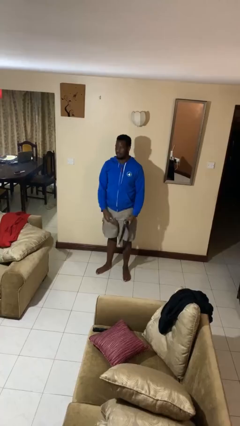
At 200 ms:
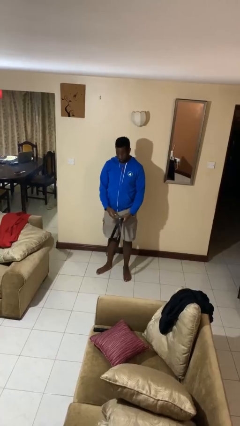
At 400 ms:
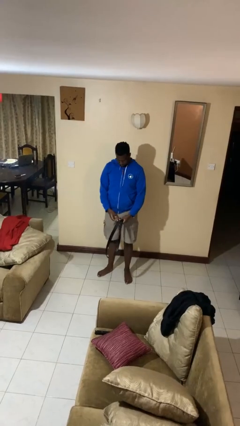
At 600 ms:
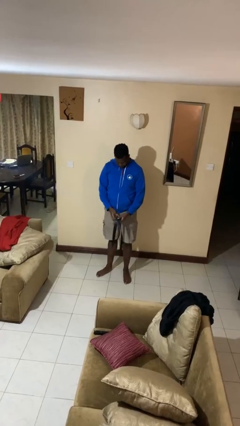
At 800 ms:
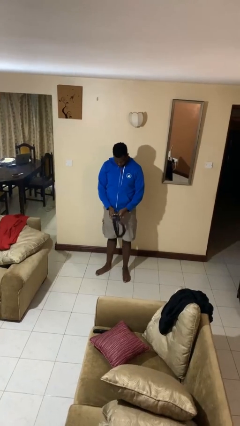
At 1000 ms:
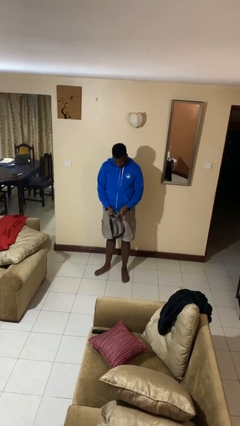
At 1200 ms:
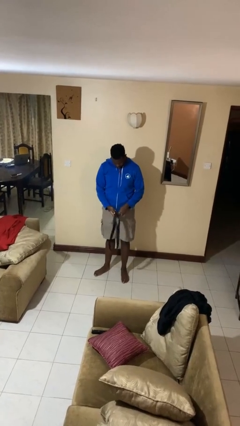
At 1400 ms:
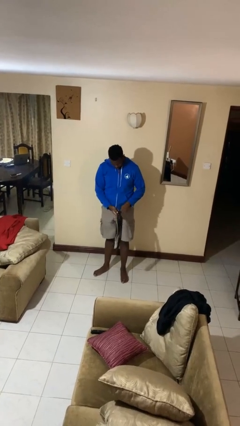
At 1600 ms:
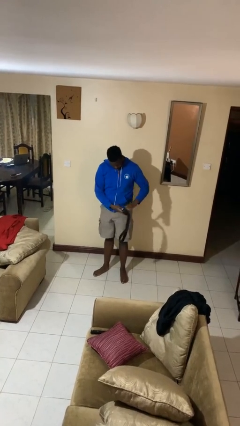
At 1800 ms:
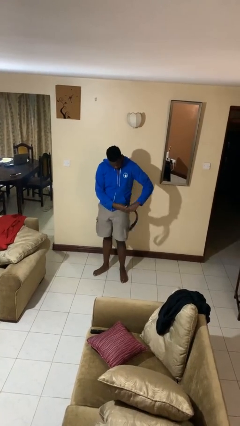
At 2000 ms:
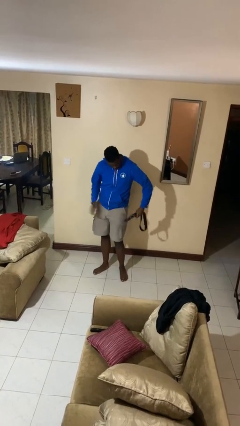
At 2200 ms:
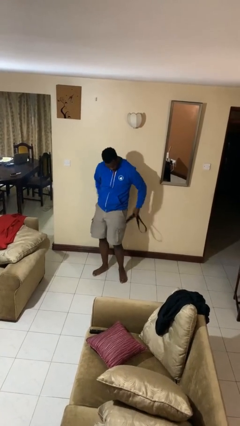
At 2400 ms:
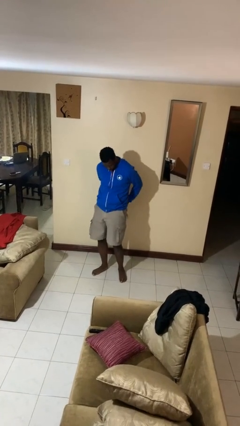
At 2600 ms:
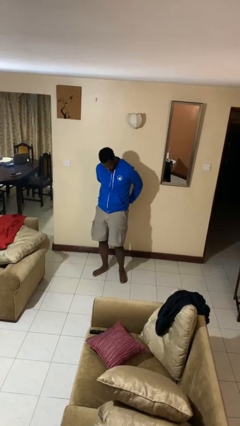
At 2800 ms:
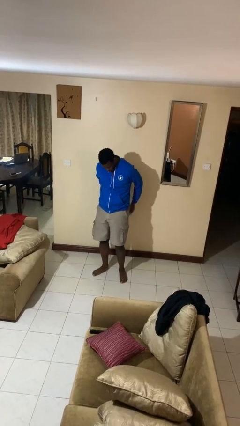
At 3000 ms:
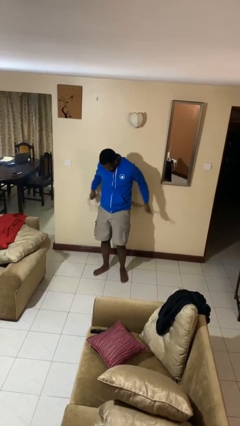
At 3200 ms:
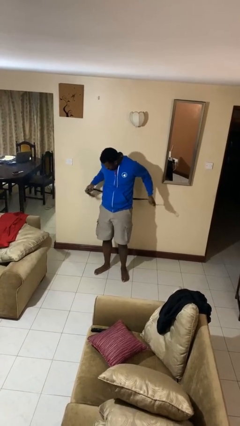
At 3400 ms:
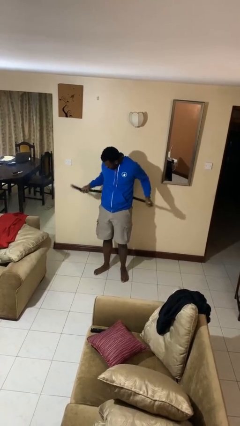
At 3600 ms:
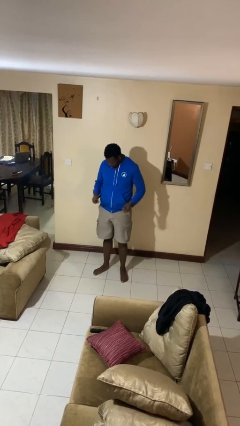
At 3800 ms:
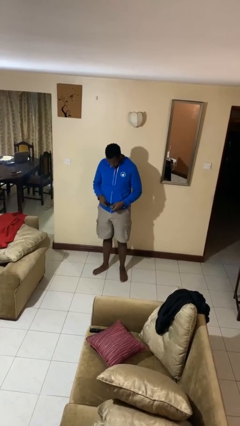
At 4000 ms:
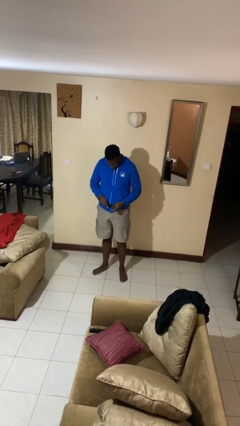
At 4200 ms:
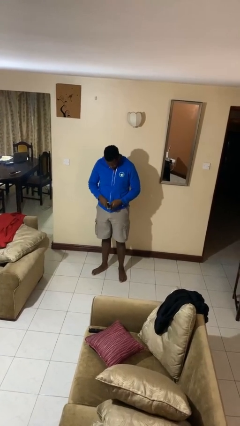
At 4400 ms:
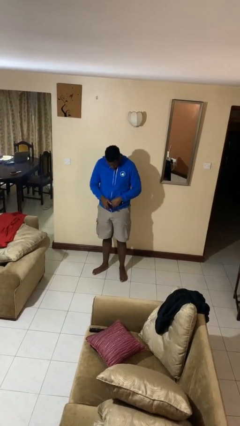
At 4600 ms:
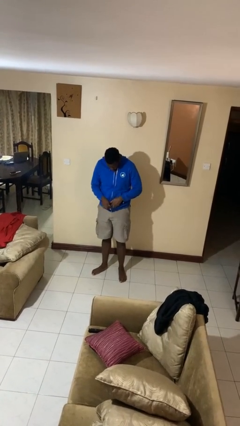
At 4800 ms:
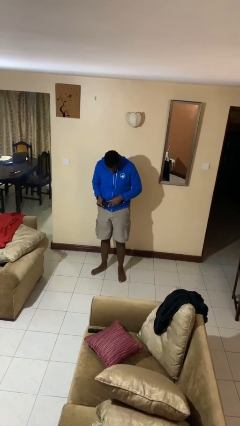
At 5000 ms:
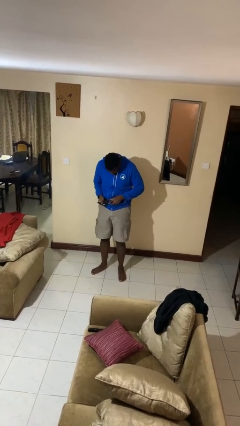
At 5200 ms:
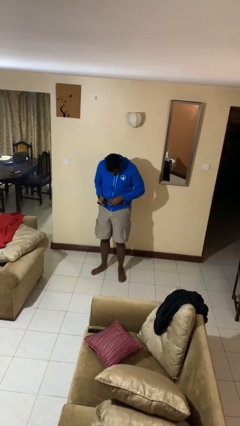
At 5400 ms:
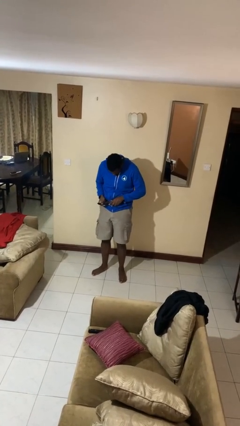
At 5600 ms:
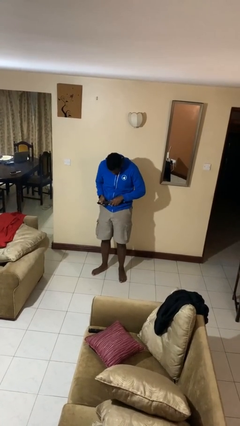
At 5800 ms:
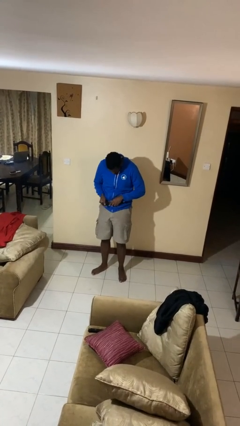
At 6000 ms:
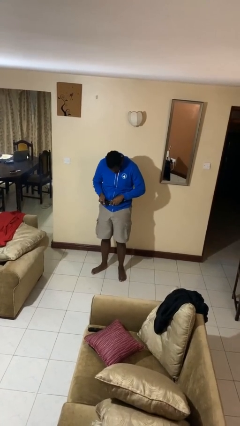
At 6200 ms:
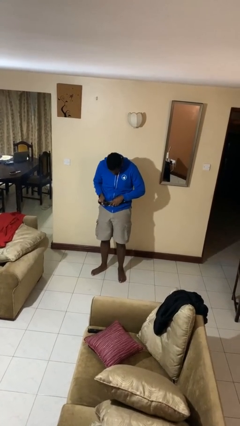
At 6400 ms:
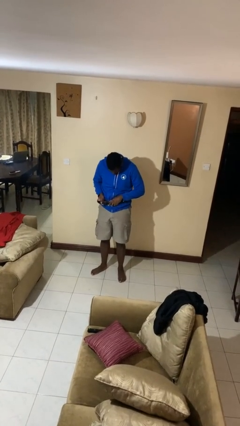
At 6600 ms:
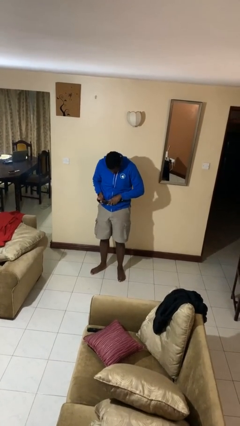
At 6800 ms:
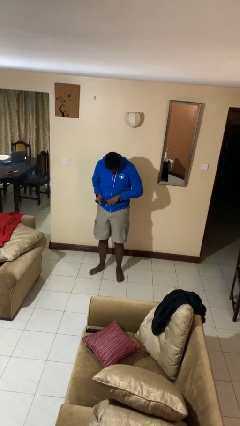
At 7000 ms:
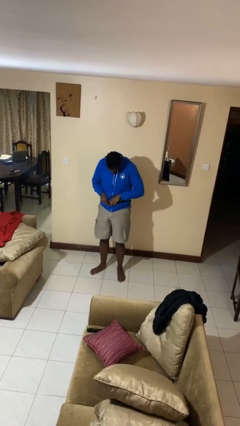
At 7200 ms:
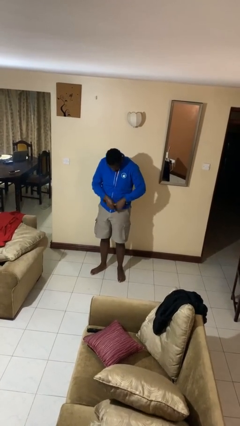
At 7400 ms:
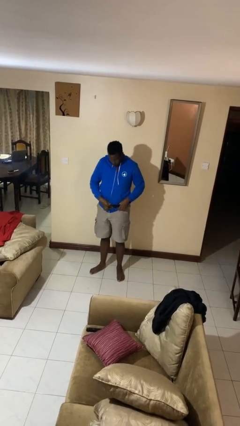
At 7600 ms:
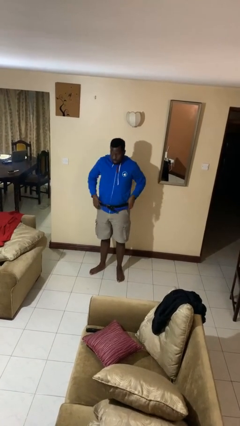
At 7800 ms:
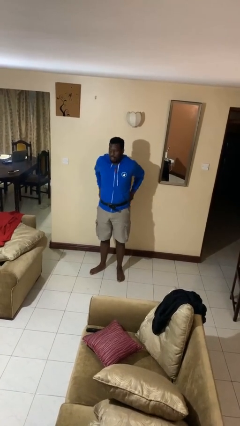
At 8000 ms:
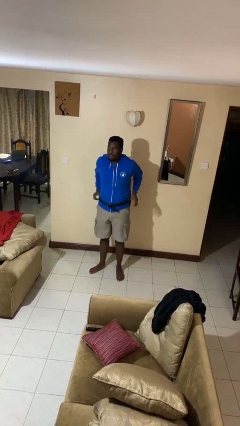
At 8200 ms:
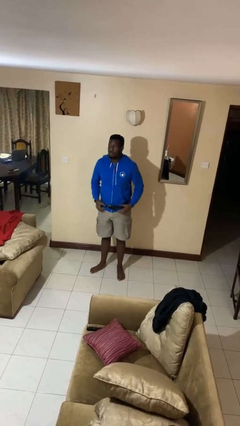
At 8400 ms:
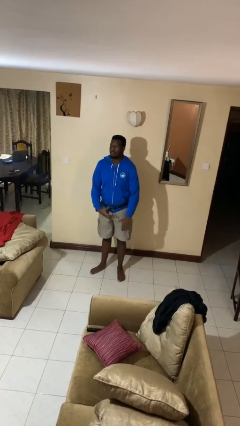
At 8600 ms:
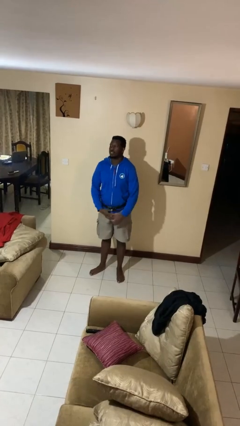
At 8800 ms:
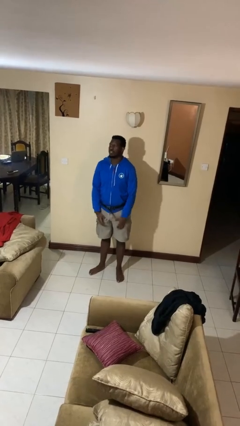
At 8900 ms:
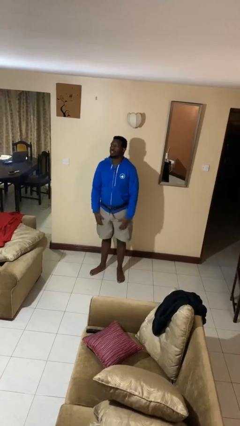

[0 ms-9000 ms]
person puts on belt

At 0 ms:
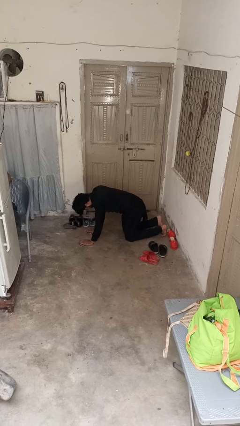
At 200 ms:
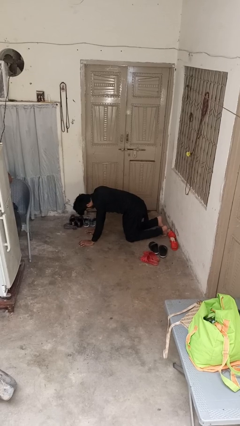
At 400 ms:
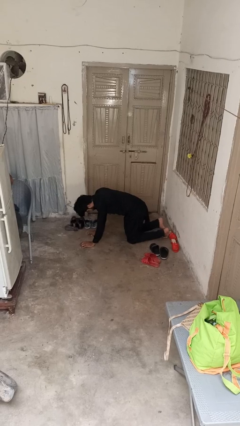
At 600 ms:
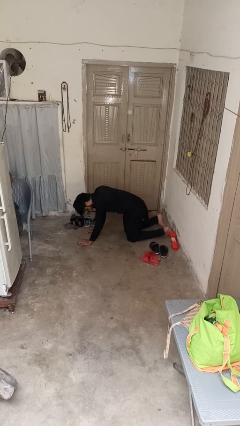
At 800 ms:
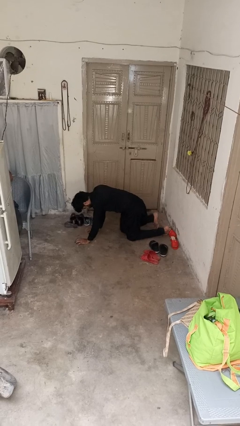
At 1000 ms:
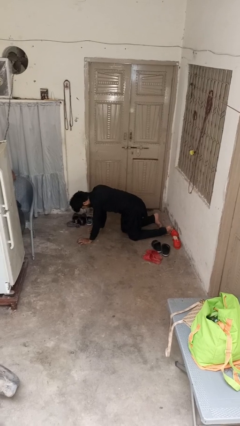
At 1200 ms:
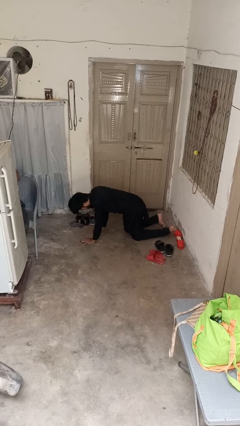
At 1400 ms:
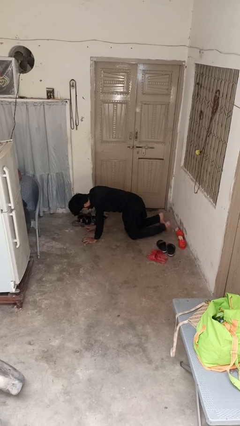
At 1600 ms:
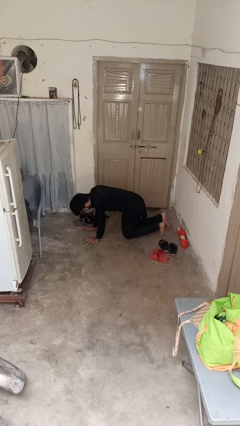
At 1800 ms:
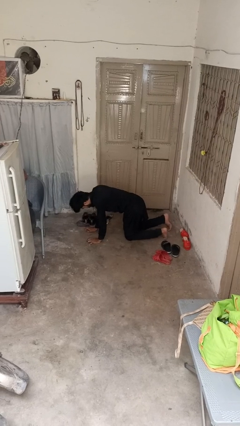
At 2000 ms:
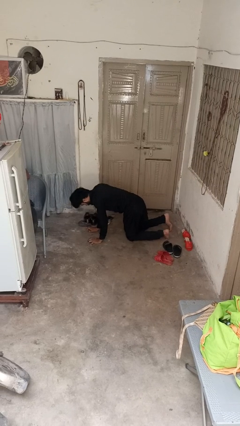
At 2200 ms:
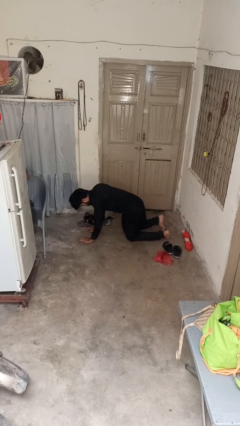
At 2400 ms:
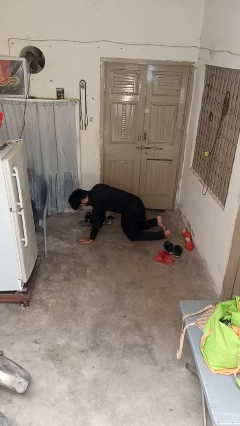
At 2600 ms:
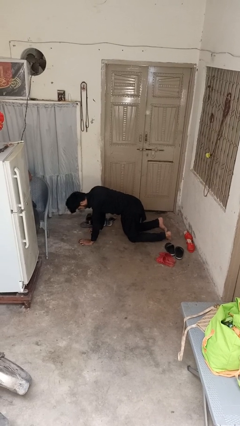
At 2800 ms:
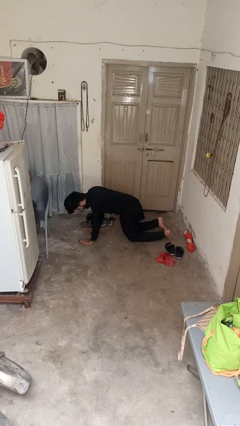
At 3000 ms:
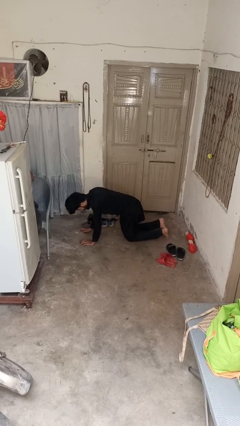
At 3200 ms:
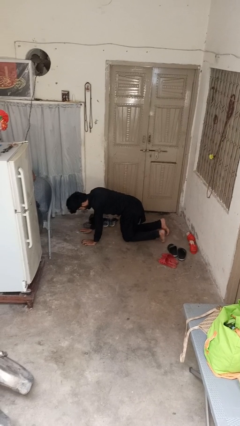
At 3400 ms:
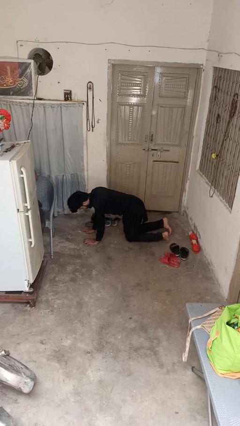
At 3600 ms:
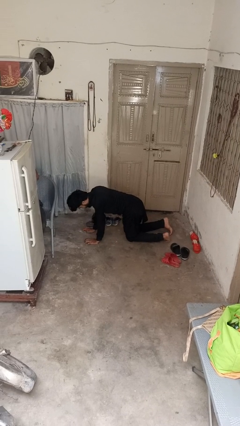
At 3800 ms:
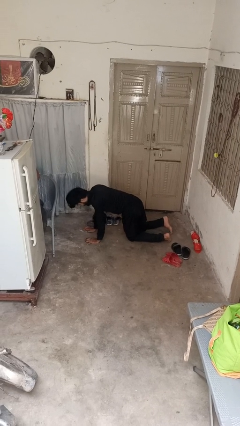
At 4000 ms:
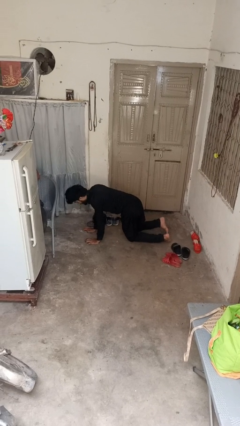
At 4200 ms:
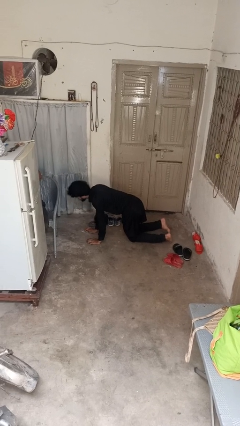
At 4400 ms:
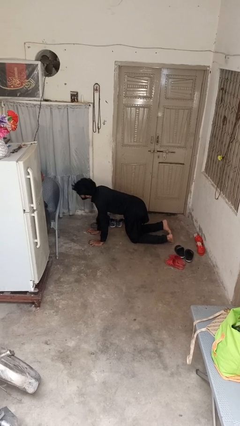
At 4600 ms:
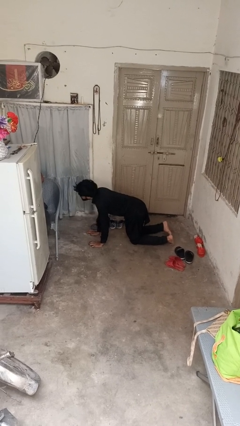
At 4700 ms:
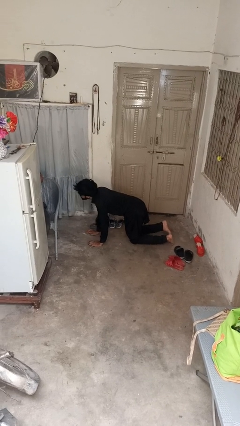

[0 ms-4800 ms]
person crawls

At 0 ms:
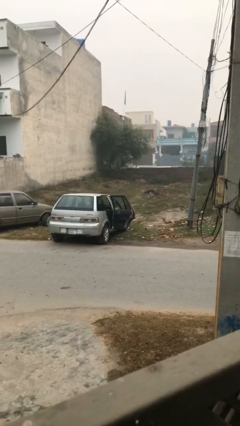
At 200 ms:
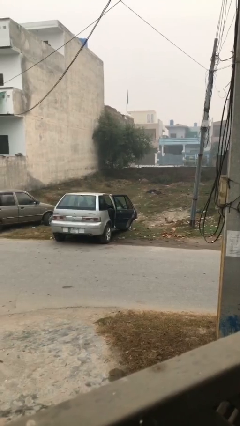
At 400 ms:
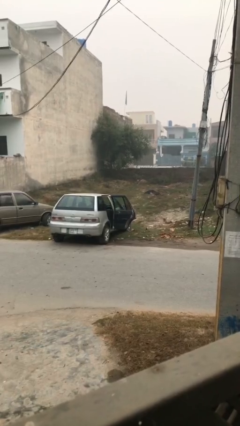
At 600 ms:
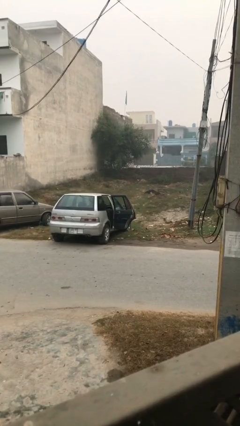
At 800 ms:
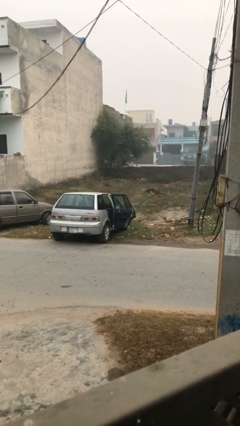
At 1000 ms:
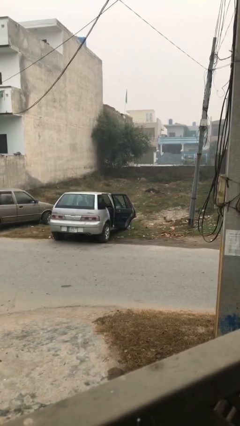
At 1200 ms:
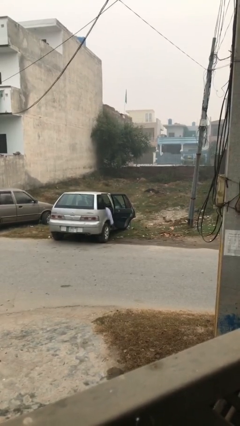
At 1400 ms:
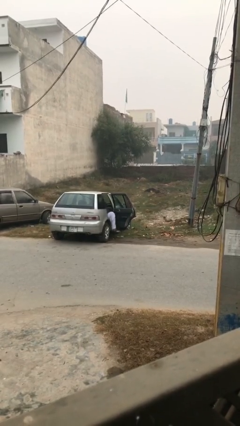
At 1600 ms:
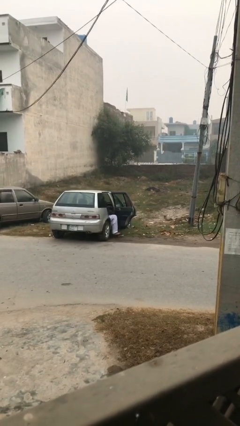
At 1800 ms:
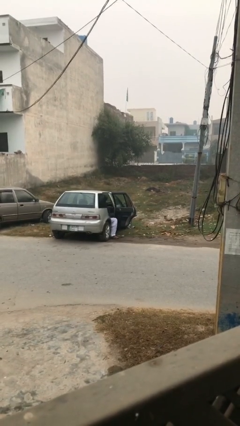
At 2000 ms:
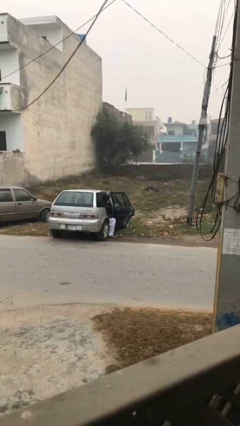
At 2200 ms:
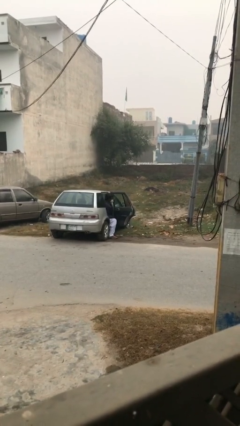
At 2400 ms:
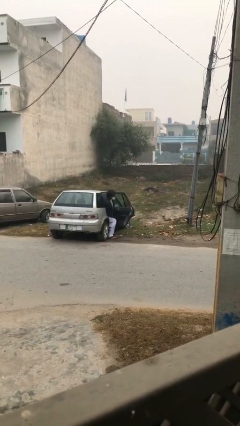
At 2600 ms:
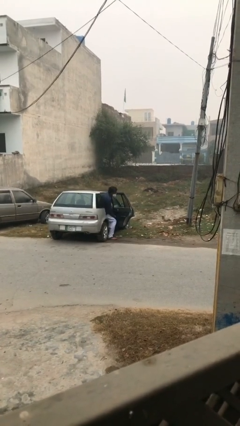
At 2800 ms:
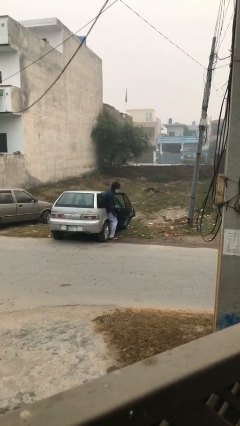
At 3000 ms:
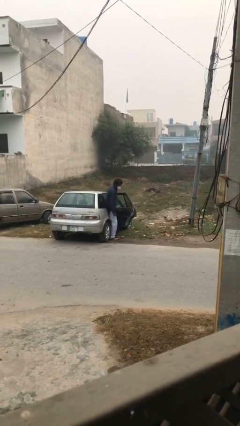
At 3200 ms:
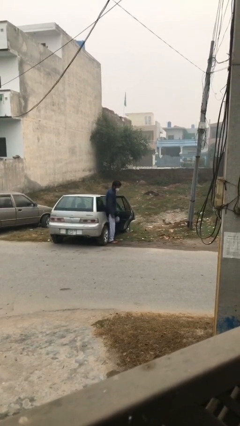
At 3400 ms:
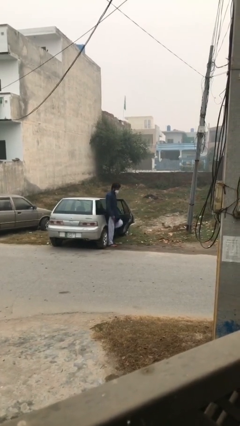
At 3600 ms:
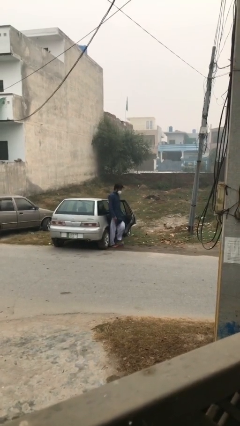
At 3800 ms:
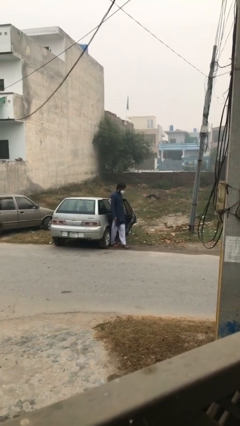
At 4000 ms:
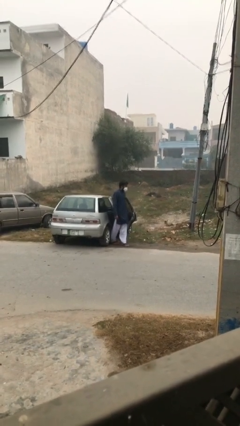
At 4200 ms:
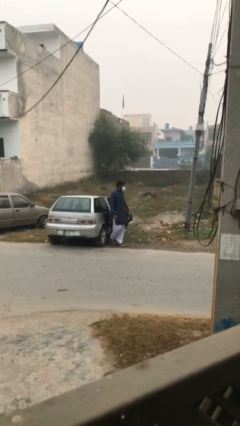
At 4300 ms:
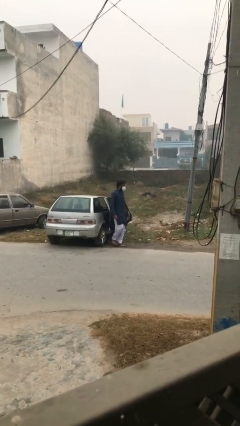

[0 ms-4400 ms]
person exits car
